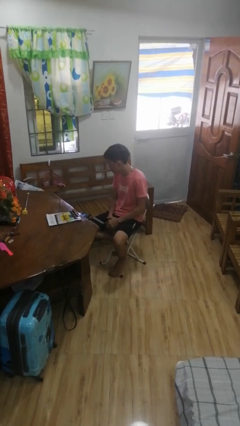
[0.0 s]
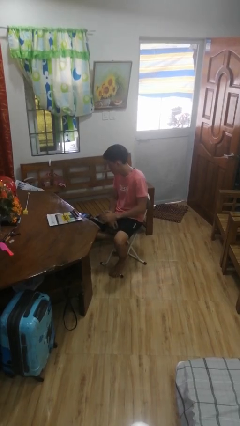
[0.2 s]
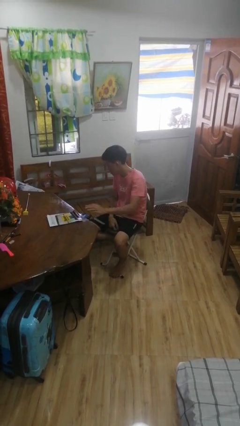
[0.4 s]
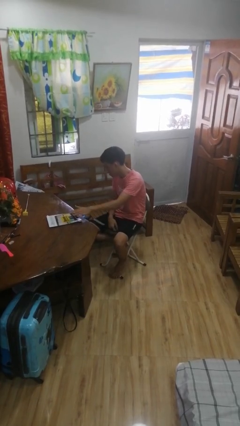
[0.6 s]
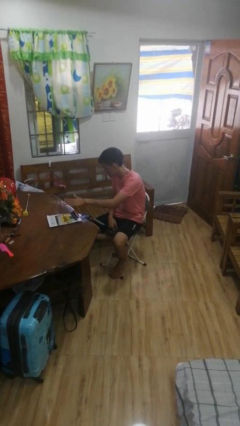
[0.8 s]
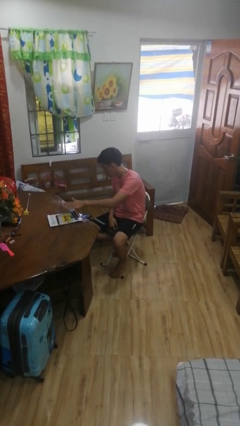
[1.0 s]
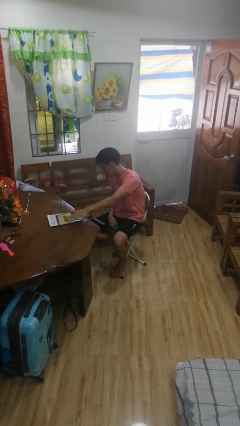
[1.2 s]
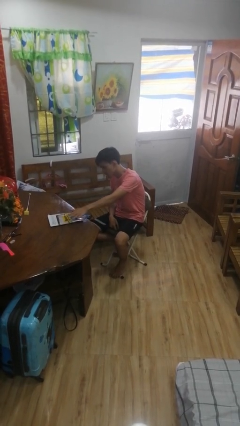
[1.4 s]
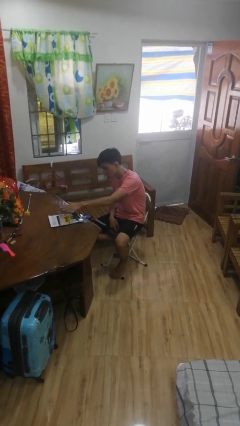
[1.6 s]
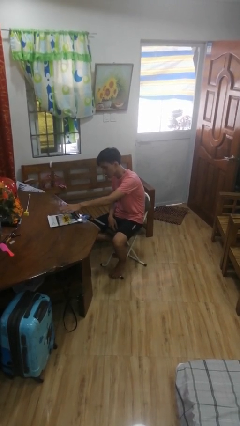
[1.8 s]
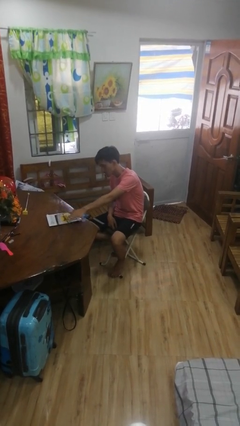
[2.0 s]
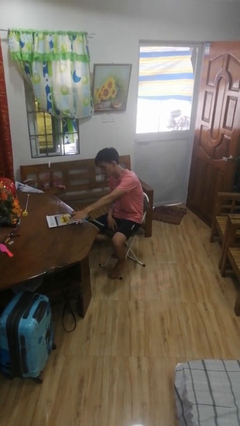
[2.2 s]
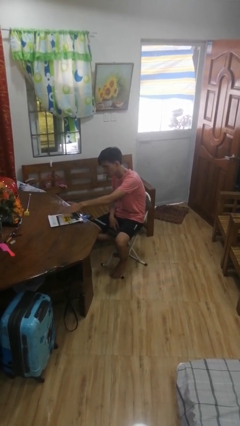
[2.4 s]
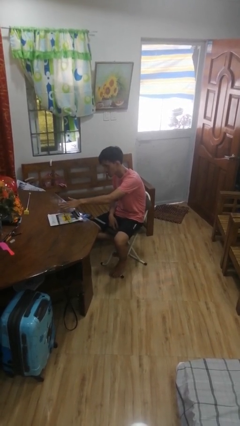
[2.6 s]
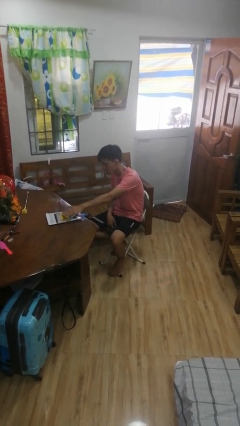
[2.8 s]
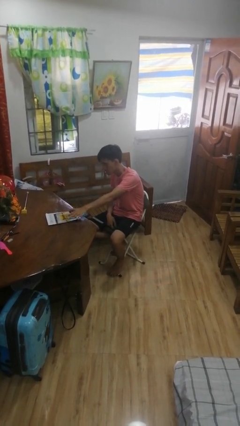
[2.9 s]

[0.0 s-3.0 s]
person waves hand over object

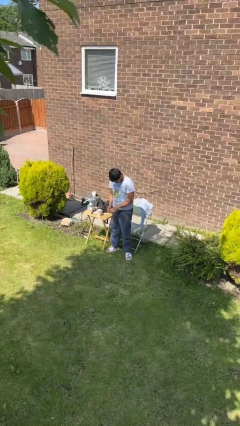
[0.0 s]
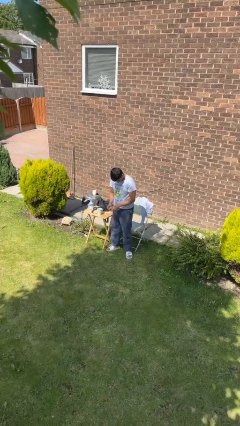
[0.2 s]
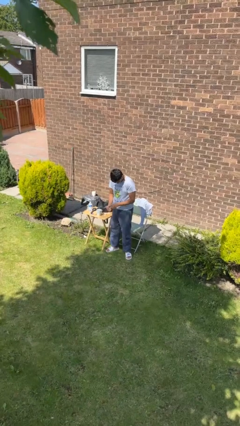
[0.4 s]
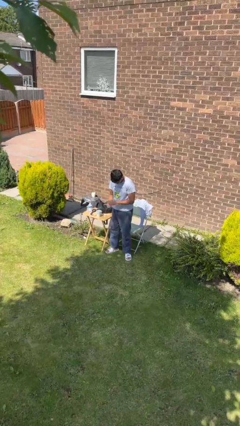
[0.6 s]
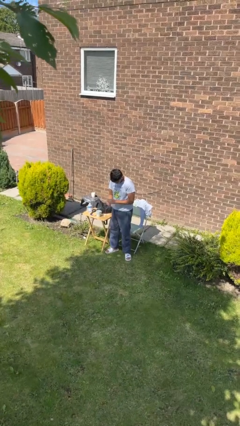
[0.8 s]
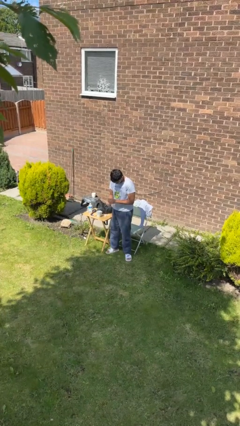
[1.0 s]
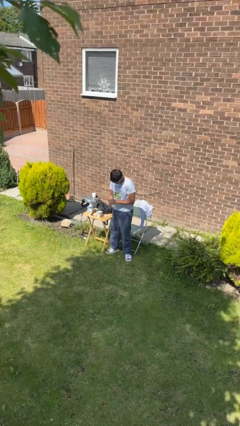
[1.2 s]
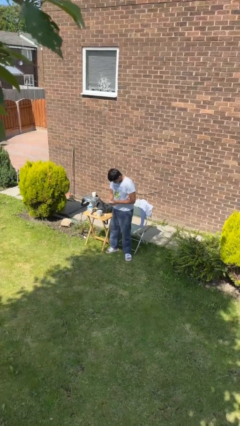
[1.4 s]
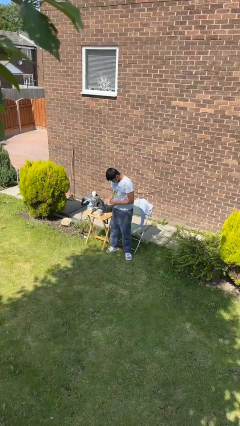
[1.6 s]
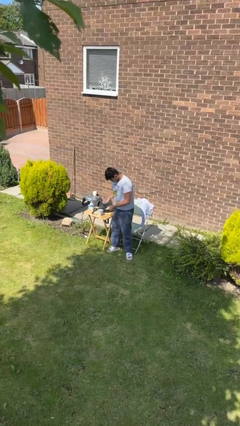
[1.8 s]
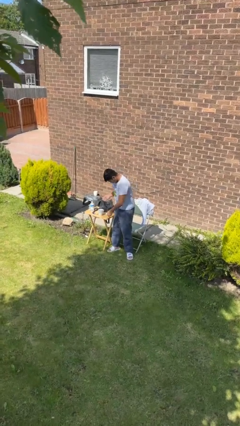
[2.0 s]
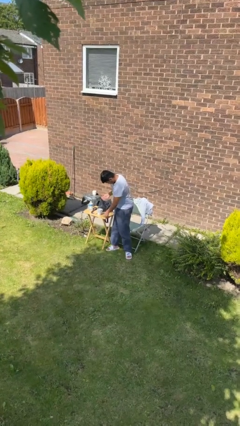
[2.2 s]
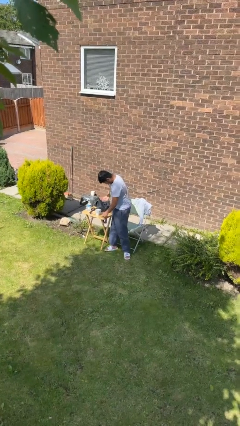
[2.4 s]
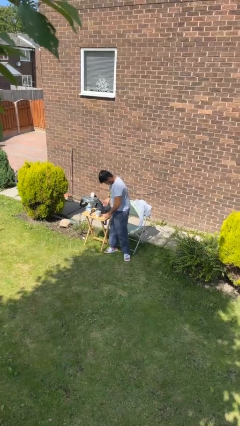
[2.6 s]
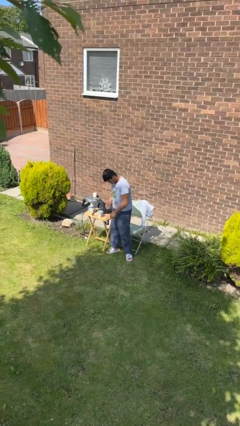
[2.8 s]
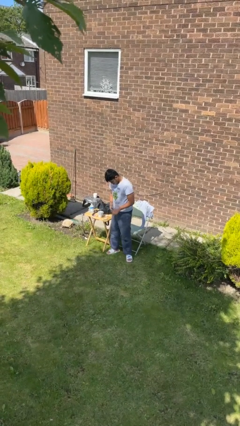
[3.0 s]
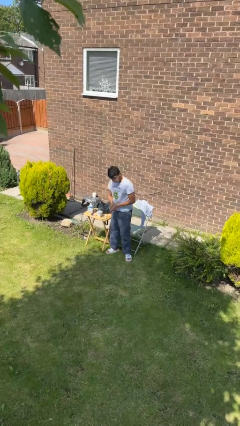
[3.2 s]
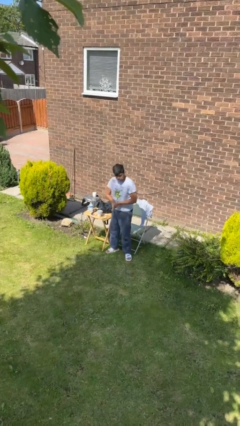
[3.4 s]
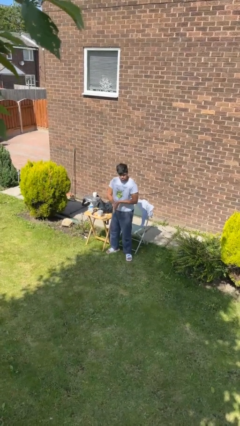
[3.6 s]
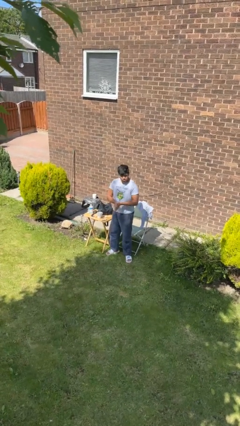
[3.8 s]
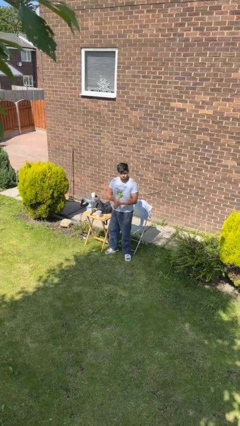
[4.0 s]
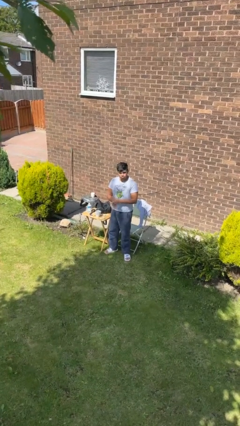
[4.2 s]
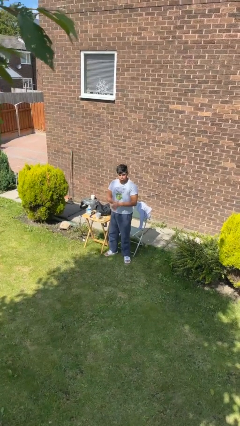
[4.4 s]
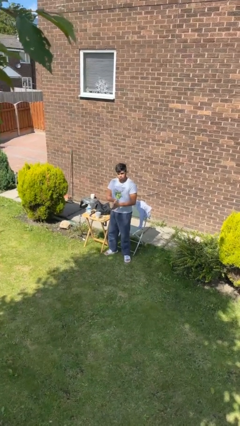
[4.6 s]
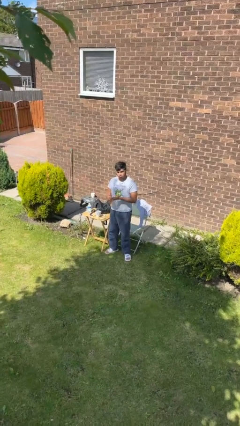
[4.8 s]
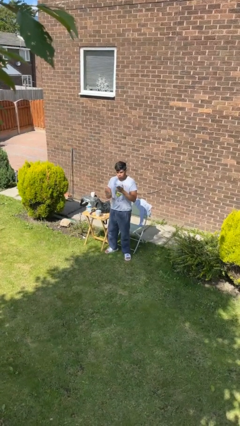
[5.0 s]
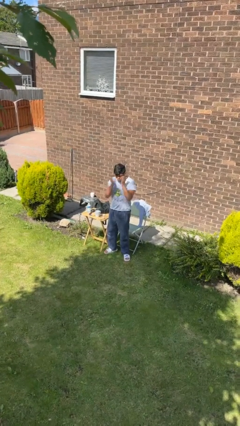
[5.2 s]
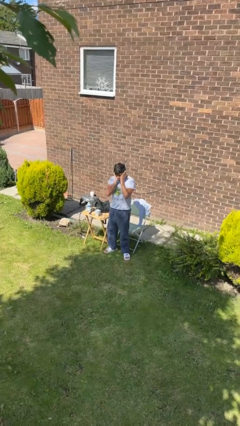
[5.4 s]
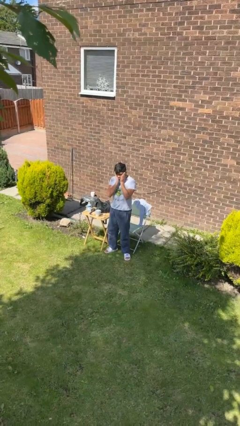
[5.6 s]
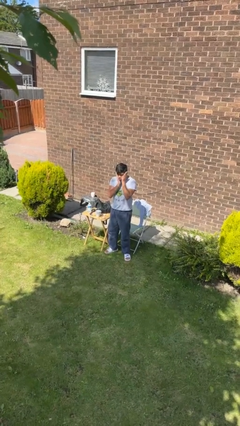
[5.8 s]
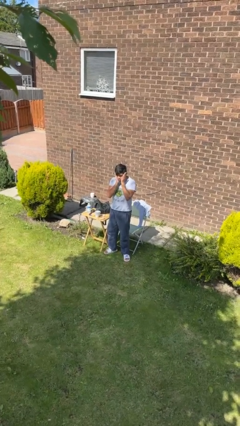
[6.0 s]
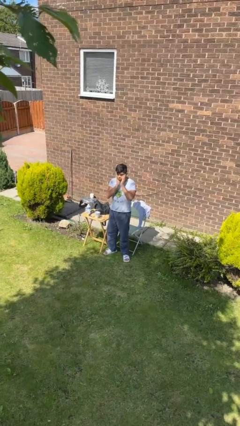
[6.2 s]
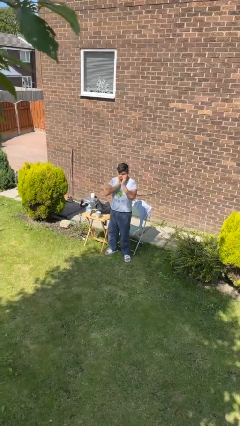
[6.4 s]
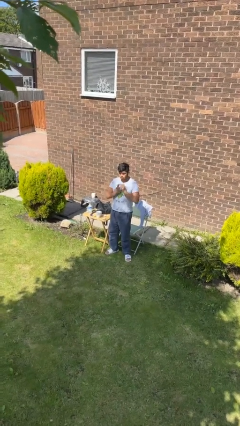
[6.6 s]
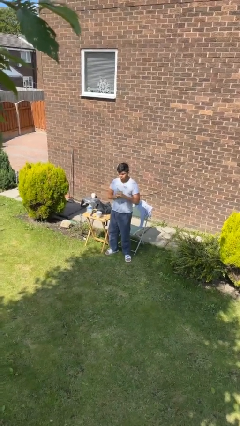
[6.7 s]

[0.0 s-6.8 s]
person applies facial moisturizer

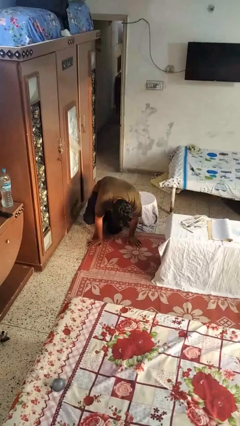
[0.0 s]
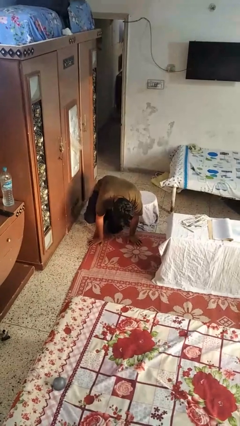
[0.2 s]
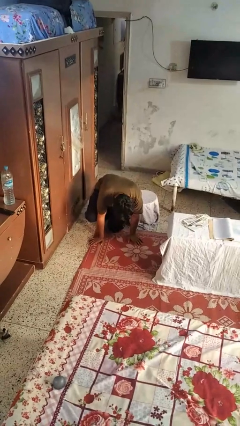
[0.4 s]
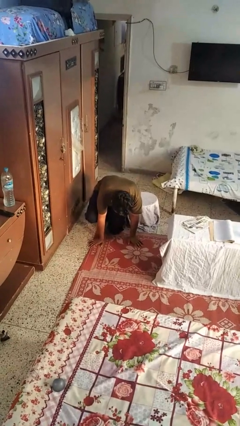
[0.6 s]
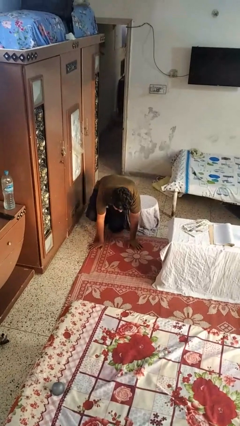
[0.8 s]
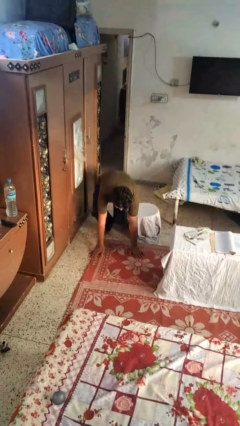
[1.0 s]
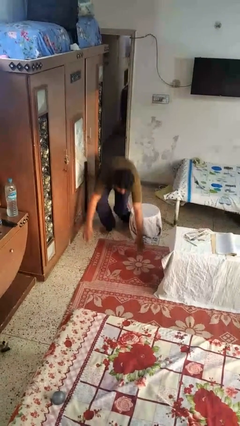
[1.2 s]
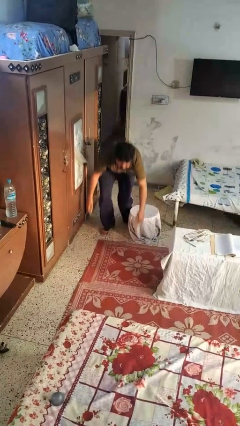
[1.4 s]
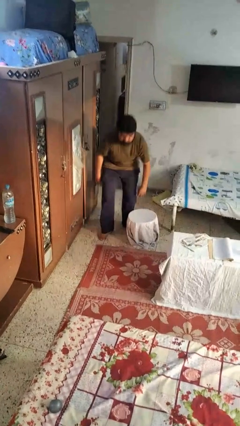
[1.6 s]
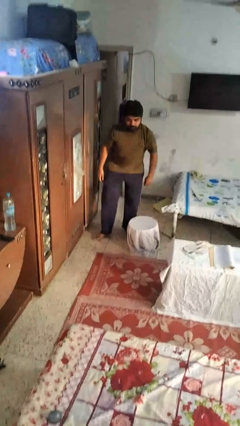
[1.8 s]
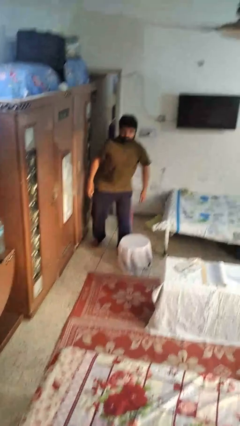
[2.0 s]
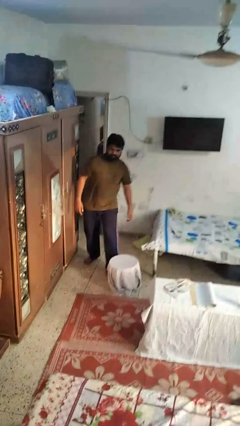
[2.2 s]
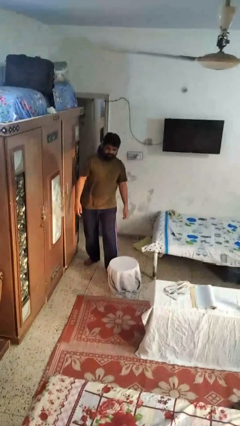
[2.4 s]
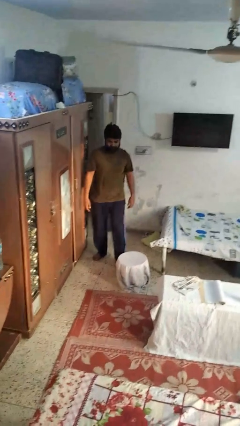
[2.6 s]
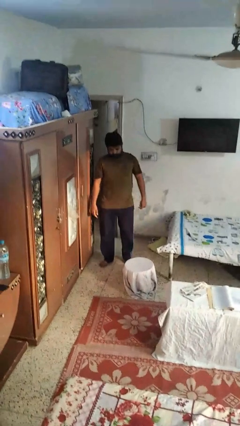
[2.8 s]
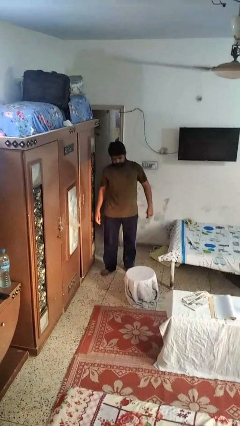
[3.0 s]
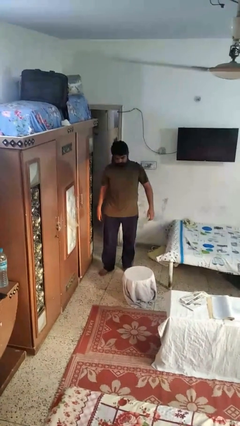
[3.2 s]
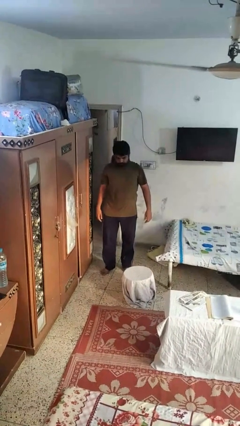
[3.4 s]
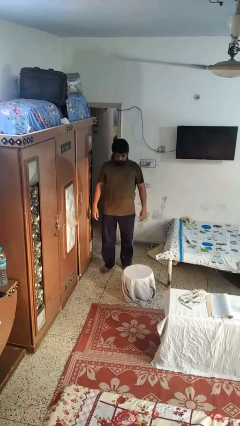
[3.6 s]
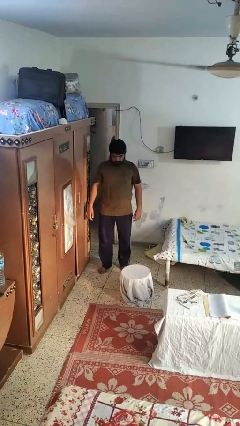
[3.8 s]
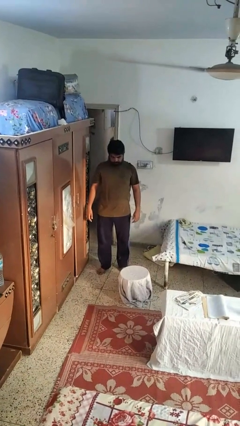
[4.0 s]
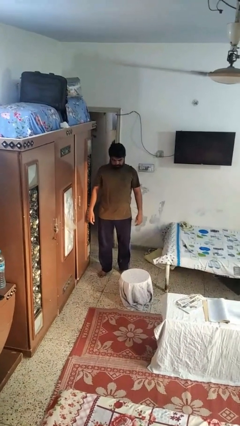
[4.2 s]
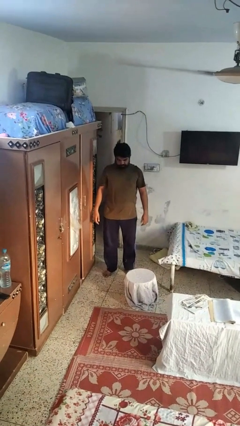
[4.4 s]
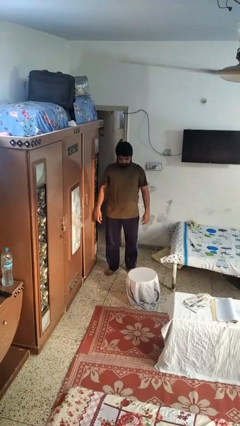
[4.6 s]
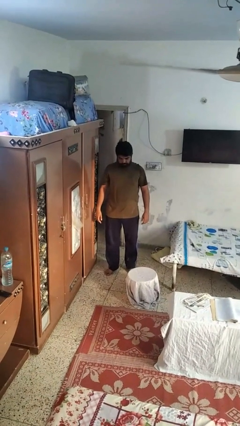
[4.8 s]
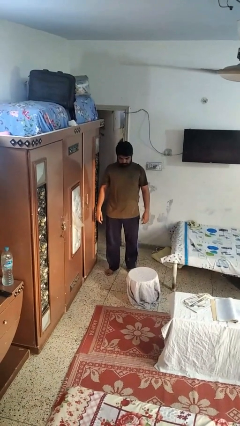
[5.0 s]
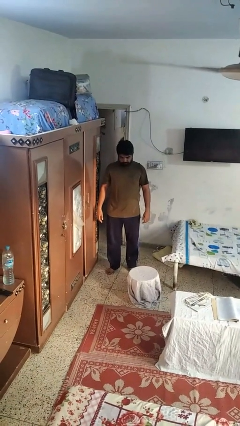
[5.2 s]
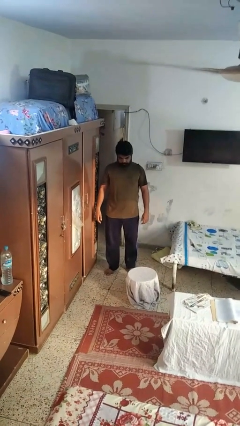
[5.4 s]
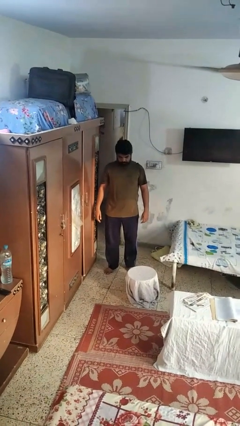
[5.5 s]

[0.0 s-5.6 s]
person stands up from floor

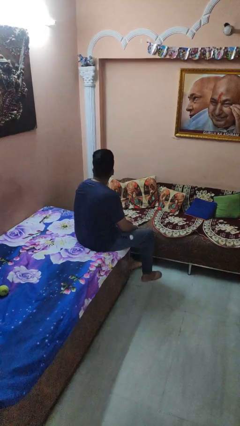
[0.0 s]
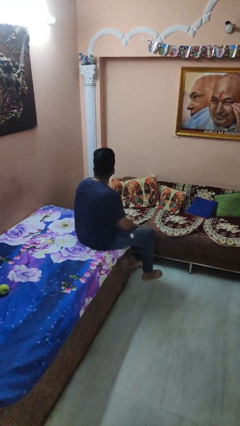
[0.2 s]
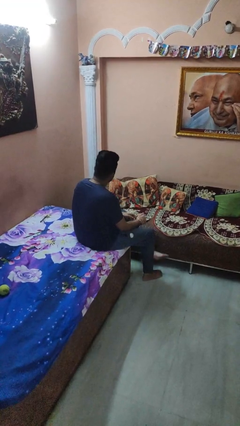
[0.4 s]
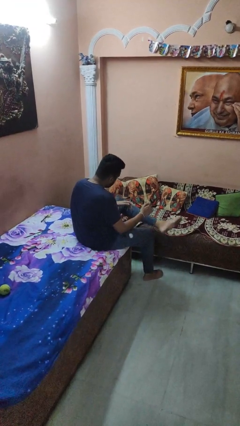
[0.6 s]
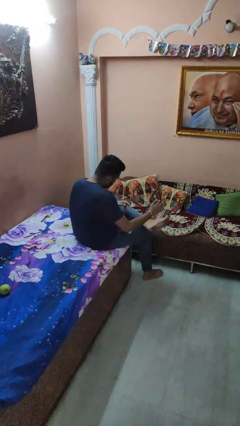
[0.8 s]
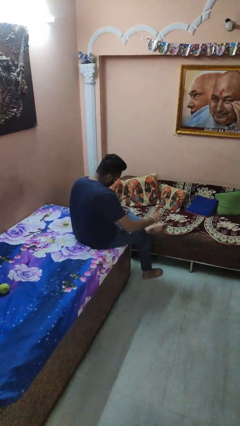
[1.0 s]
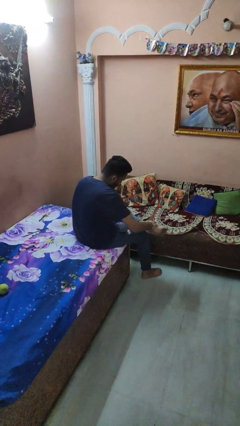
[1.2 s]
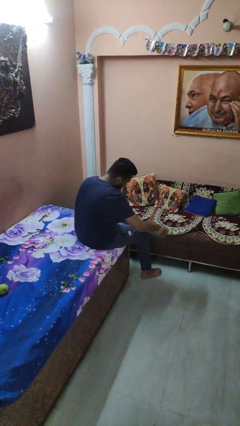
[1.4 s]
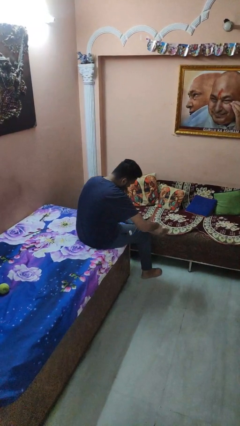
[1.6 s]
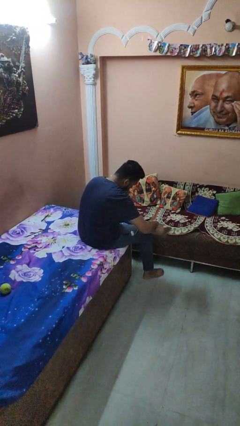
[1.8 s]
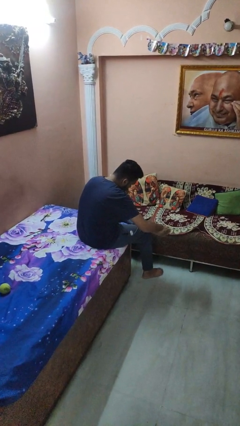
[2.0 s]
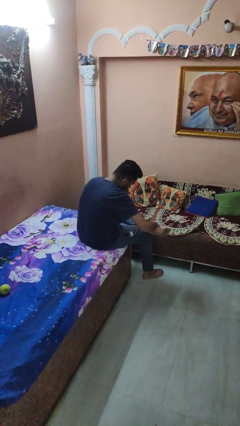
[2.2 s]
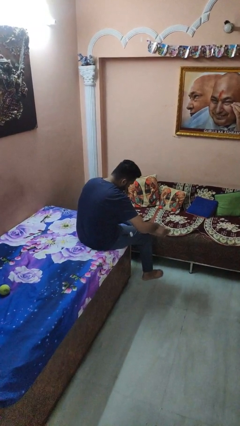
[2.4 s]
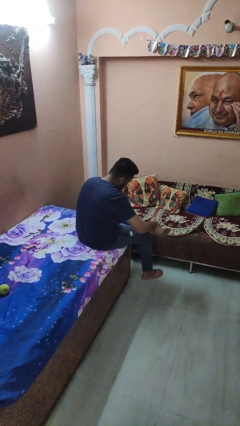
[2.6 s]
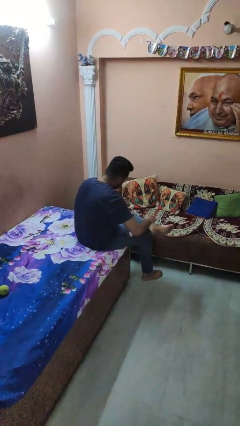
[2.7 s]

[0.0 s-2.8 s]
person rubs foot
